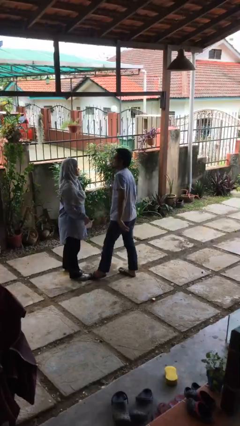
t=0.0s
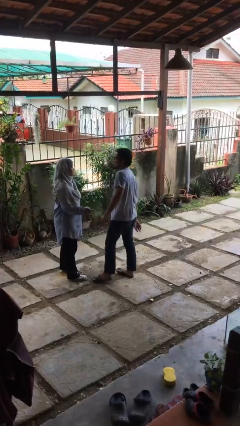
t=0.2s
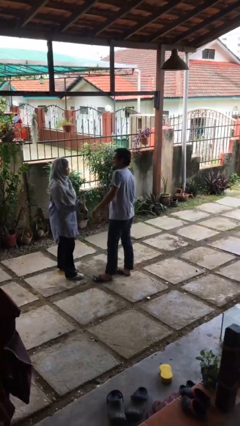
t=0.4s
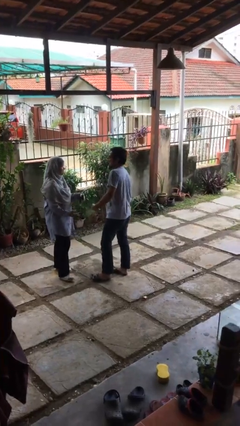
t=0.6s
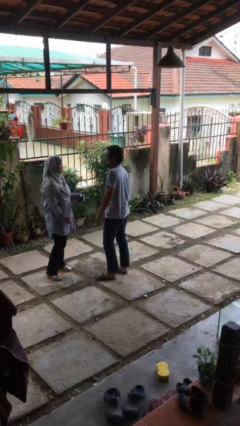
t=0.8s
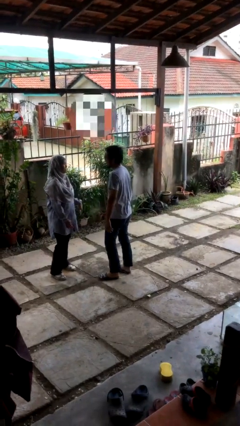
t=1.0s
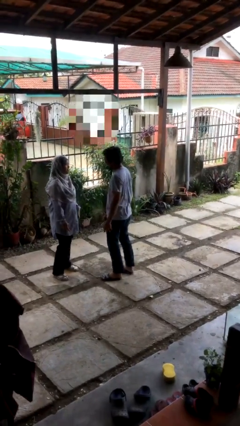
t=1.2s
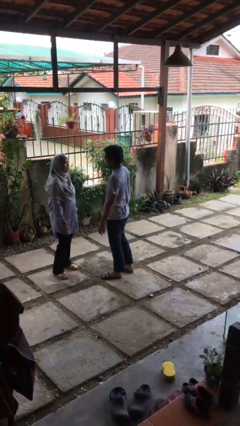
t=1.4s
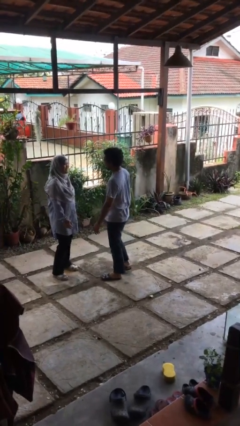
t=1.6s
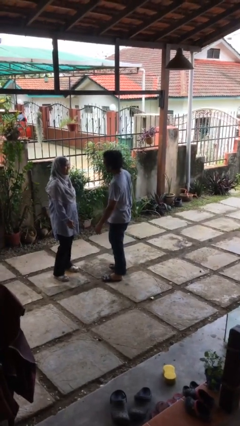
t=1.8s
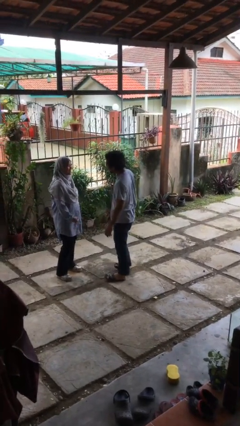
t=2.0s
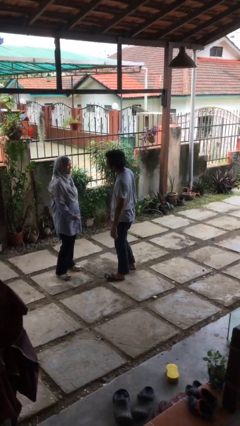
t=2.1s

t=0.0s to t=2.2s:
person talks to person

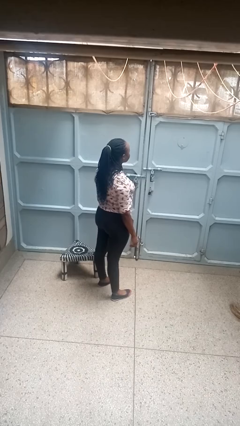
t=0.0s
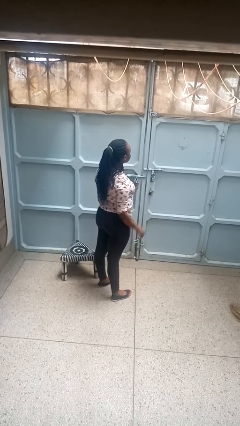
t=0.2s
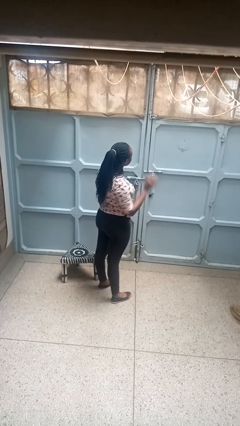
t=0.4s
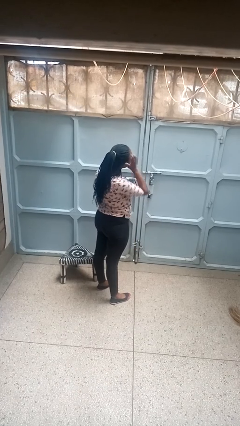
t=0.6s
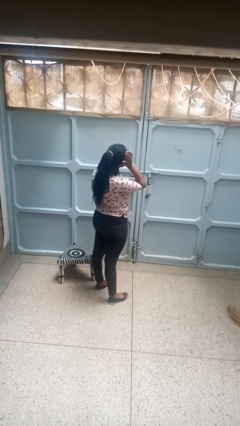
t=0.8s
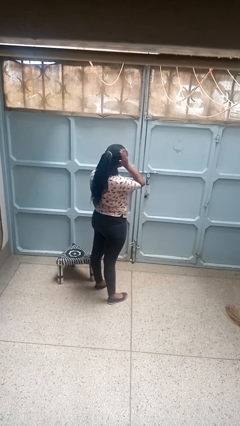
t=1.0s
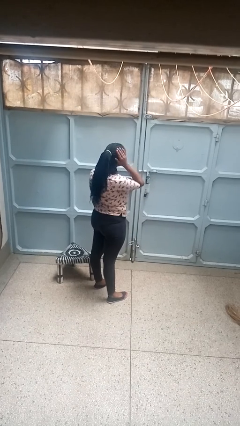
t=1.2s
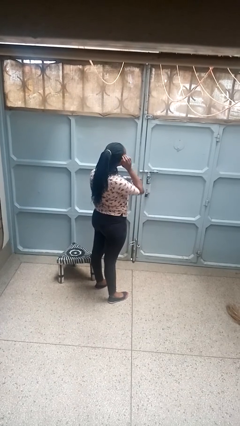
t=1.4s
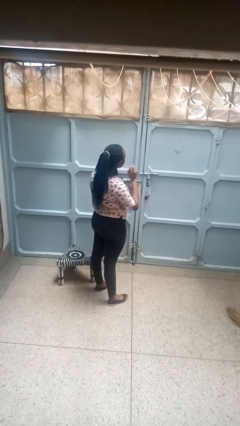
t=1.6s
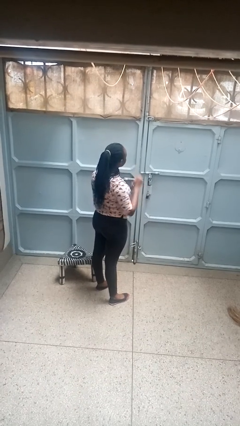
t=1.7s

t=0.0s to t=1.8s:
person pats head

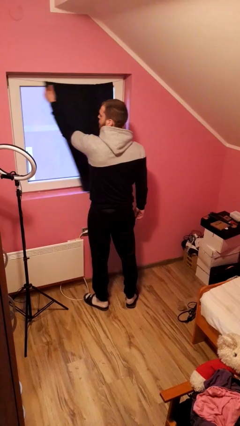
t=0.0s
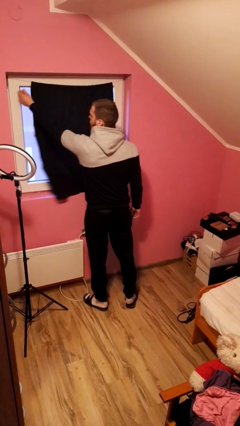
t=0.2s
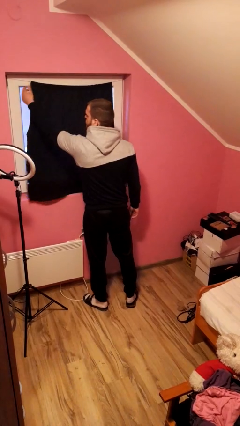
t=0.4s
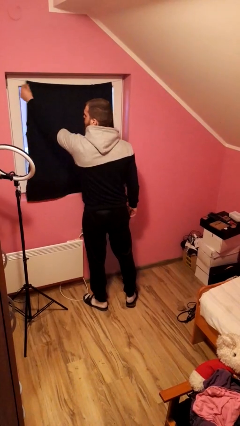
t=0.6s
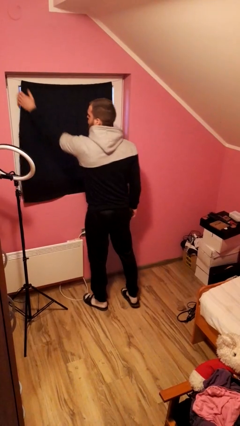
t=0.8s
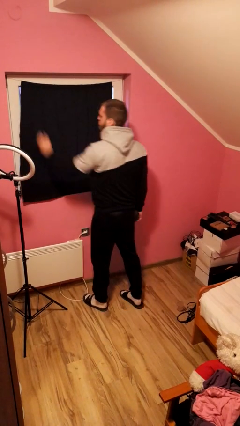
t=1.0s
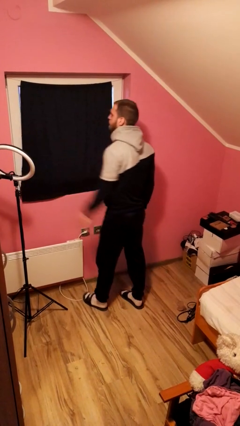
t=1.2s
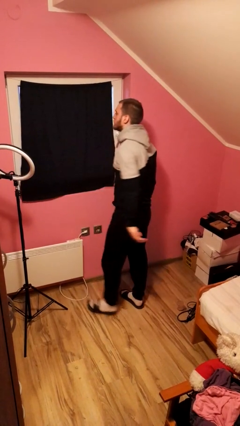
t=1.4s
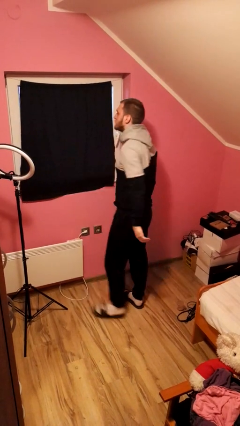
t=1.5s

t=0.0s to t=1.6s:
person closes curtains

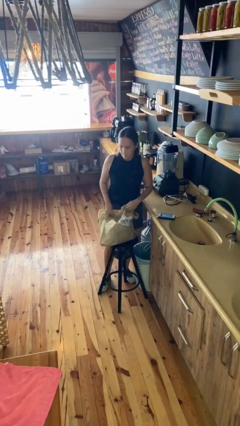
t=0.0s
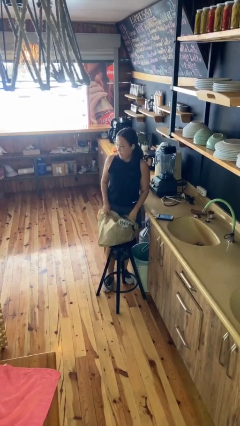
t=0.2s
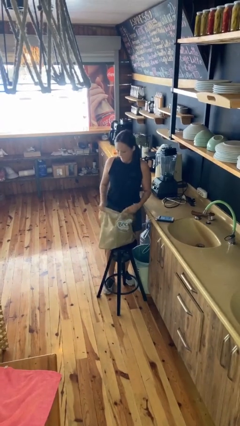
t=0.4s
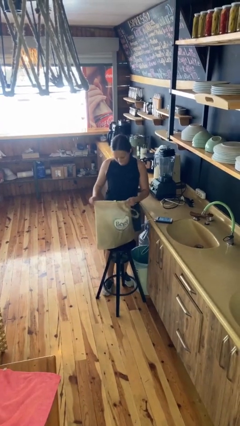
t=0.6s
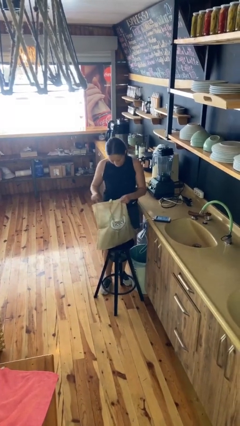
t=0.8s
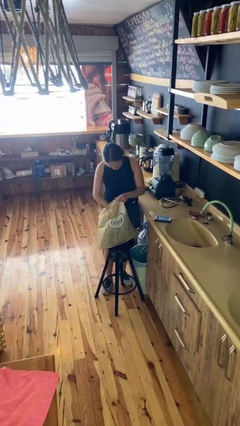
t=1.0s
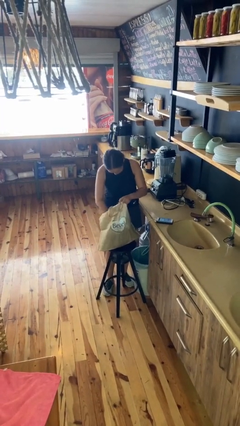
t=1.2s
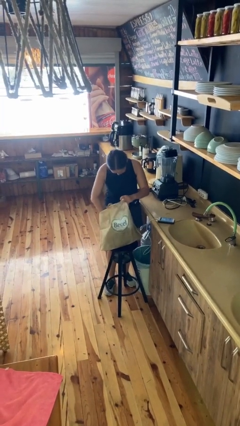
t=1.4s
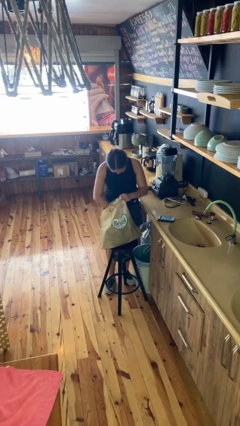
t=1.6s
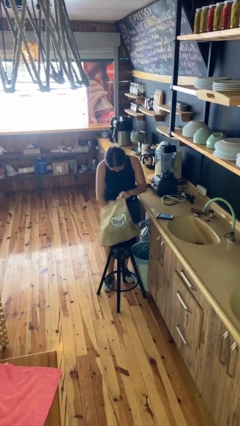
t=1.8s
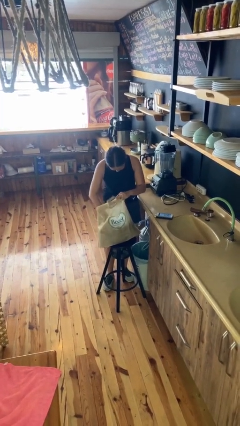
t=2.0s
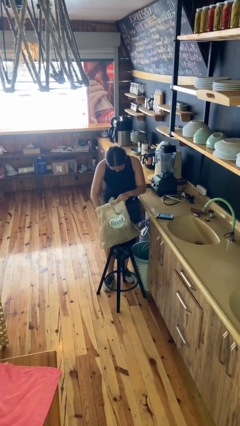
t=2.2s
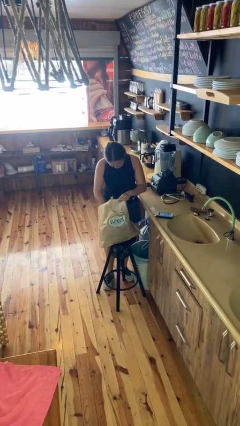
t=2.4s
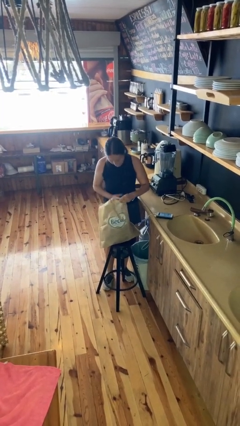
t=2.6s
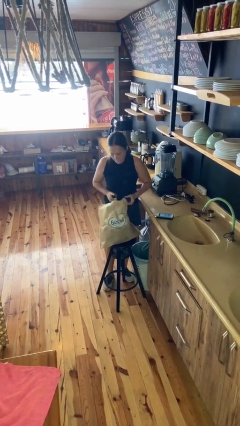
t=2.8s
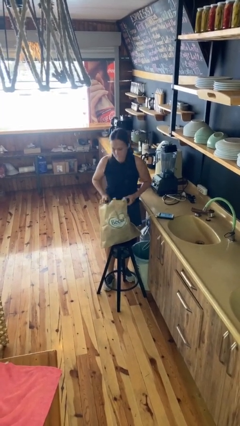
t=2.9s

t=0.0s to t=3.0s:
person searches in bag

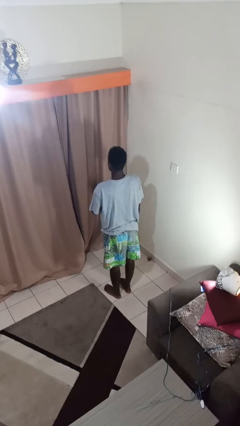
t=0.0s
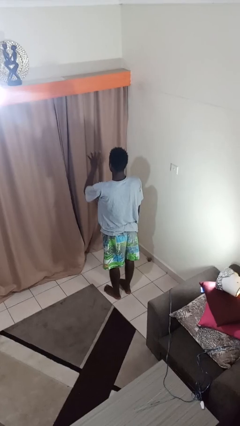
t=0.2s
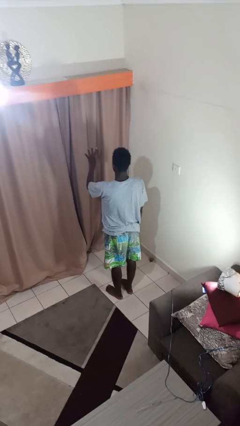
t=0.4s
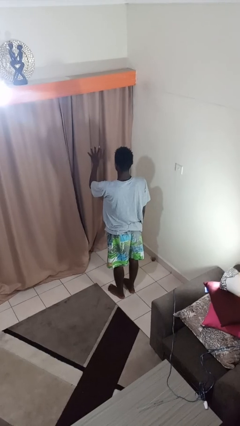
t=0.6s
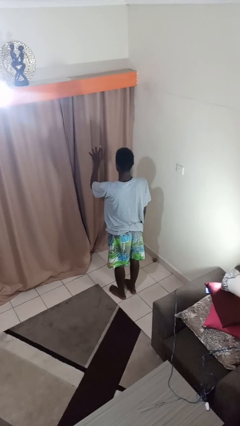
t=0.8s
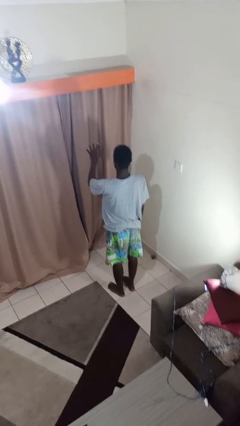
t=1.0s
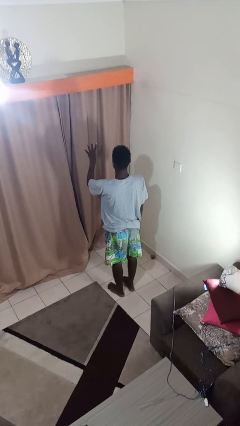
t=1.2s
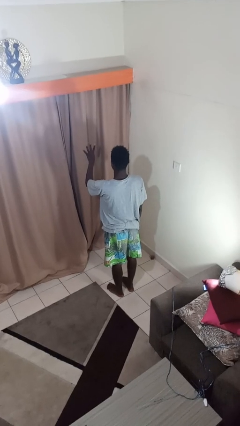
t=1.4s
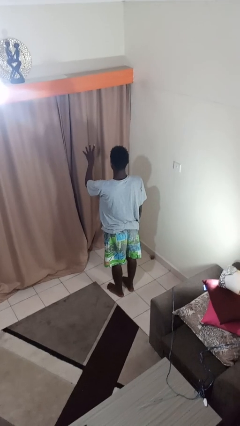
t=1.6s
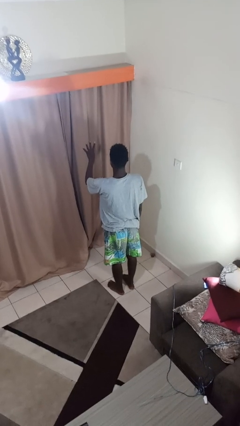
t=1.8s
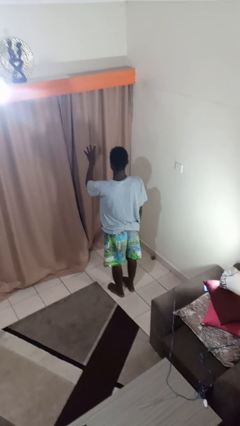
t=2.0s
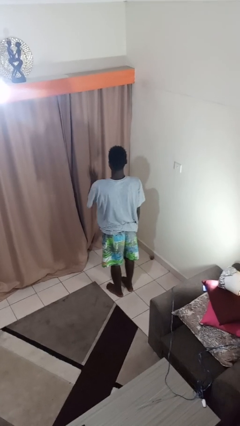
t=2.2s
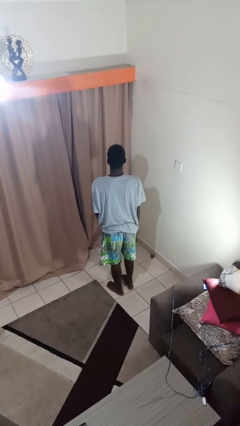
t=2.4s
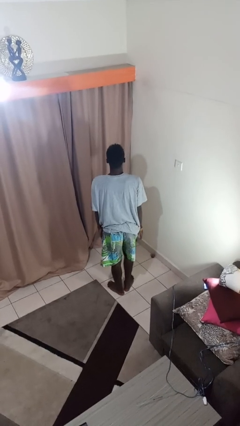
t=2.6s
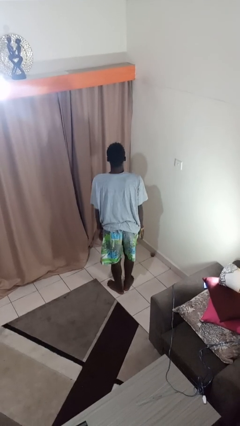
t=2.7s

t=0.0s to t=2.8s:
person gestures number four

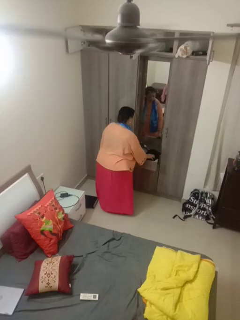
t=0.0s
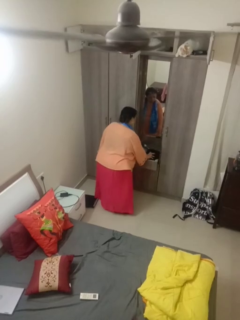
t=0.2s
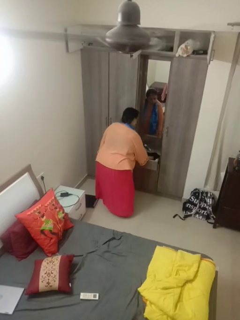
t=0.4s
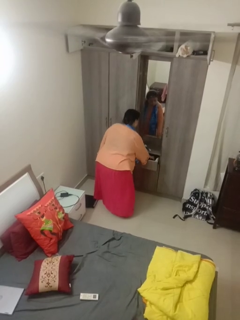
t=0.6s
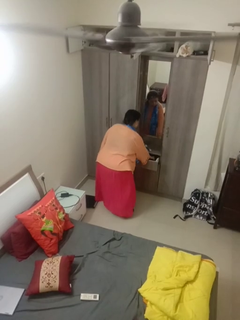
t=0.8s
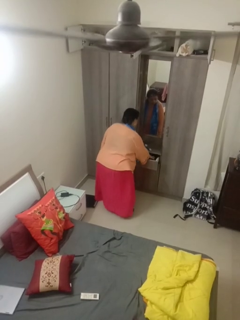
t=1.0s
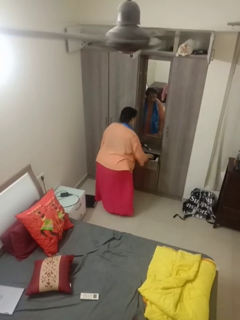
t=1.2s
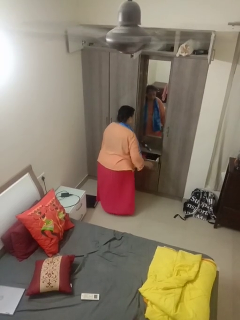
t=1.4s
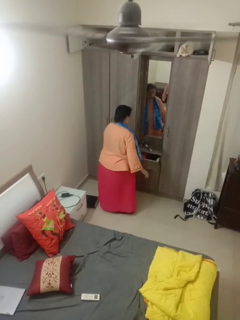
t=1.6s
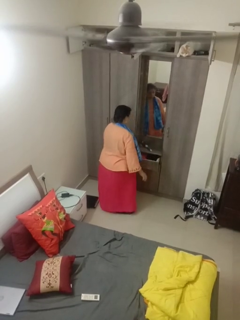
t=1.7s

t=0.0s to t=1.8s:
person puts clothes into dresser

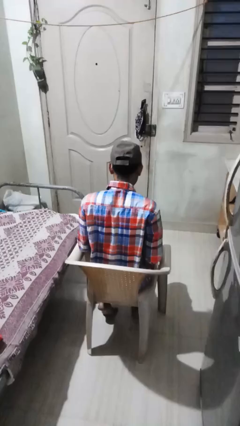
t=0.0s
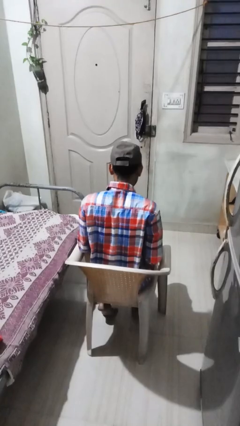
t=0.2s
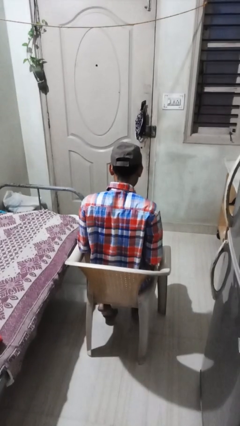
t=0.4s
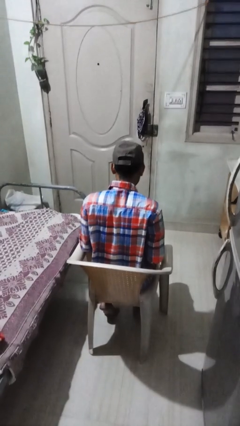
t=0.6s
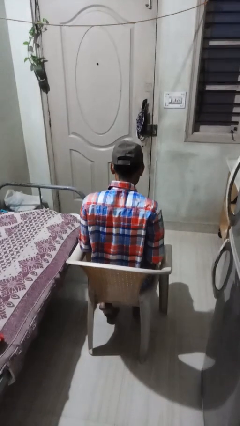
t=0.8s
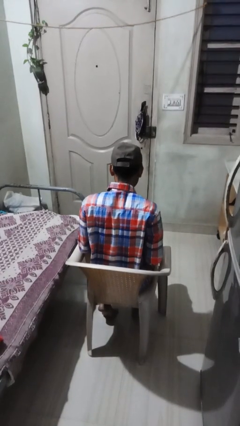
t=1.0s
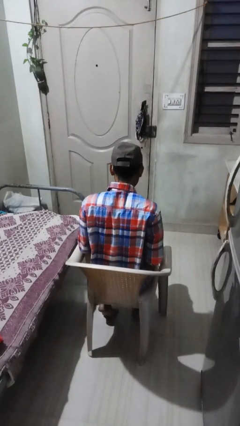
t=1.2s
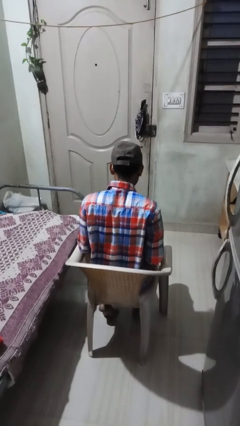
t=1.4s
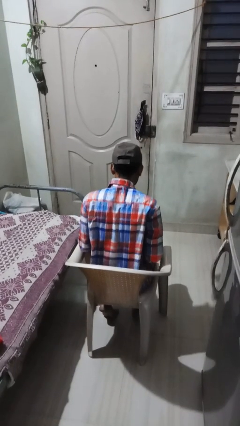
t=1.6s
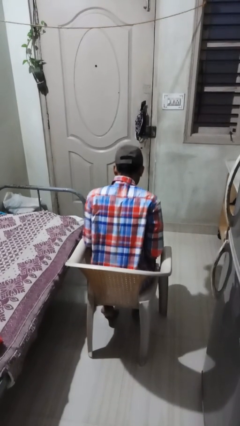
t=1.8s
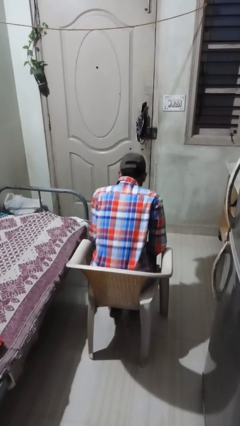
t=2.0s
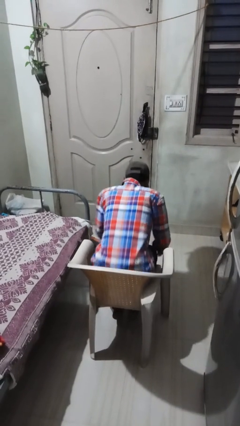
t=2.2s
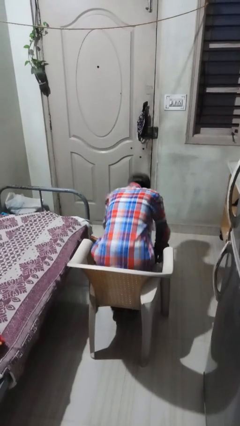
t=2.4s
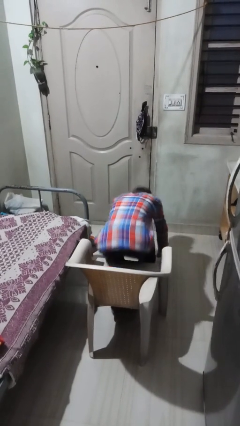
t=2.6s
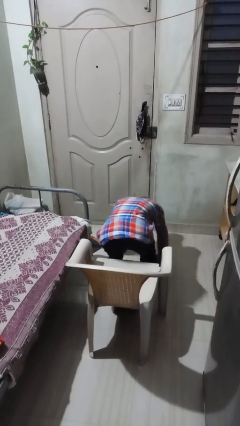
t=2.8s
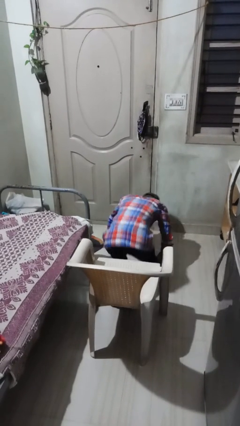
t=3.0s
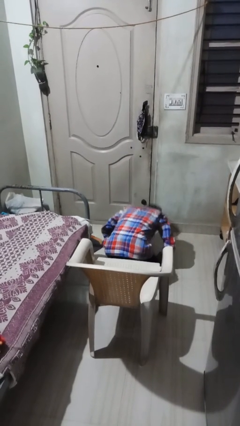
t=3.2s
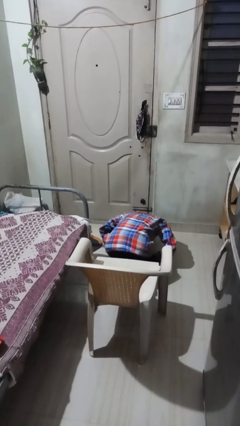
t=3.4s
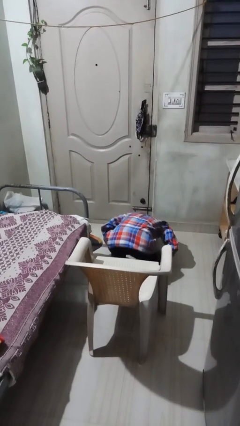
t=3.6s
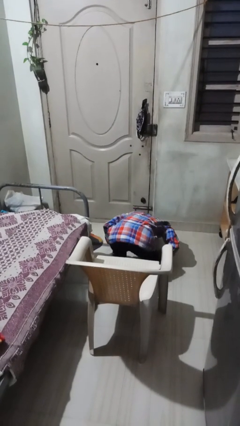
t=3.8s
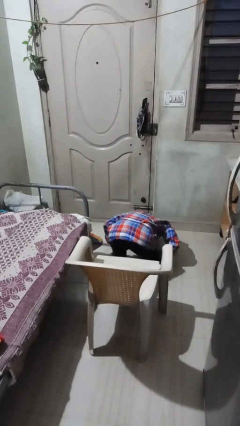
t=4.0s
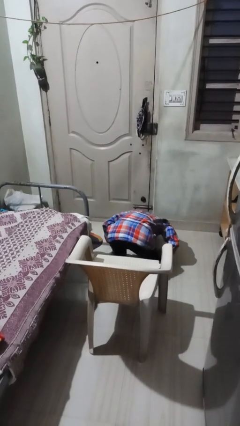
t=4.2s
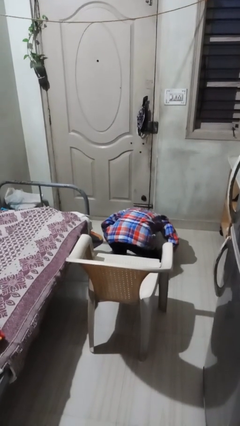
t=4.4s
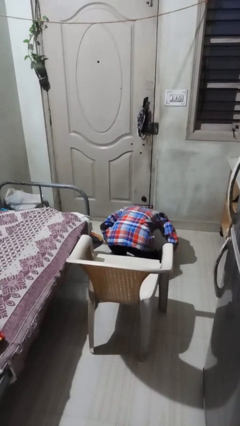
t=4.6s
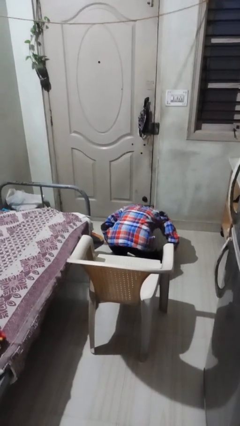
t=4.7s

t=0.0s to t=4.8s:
person falls from chair
